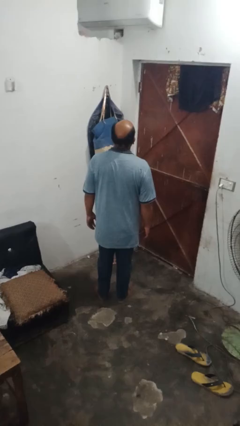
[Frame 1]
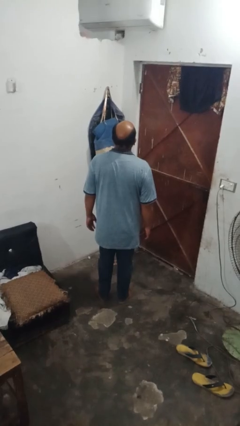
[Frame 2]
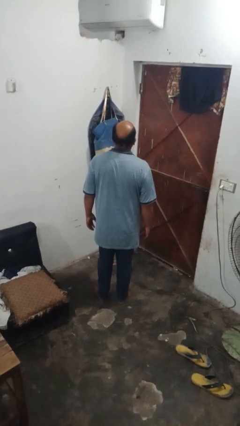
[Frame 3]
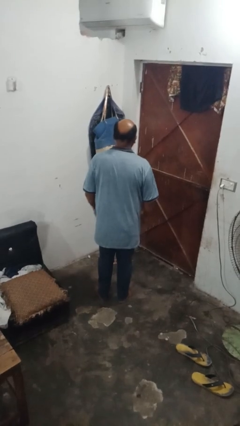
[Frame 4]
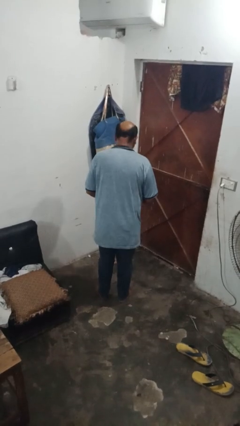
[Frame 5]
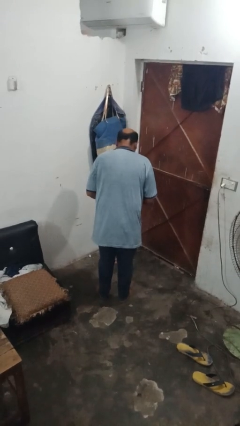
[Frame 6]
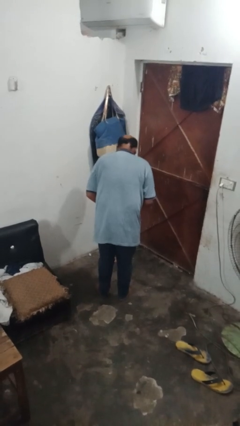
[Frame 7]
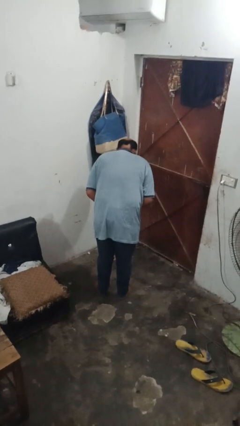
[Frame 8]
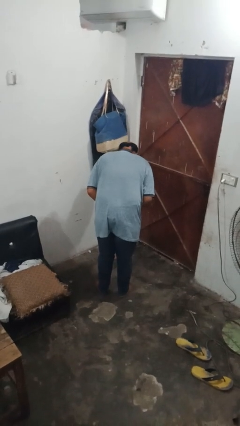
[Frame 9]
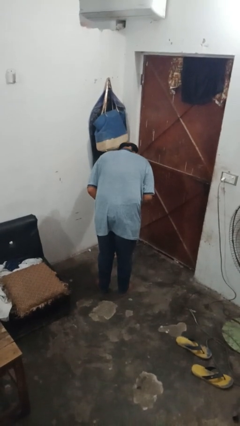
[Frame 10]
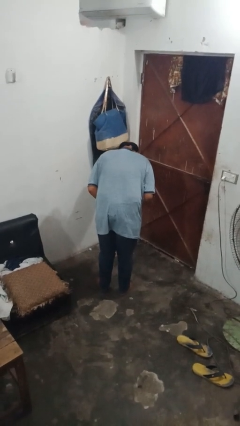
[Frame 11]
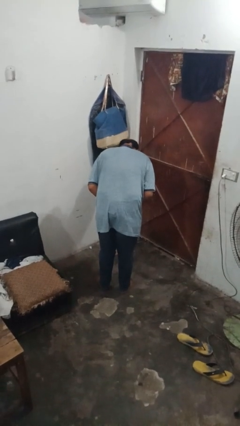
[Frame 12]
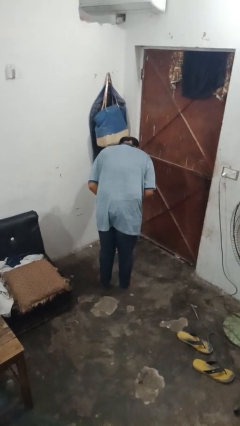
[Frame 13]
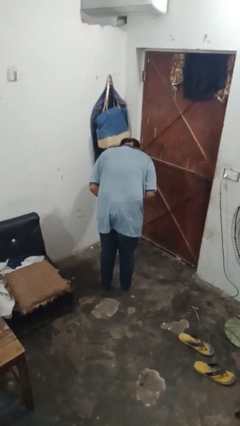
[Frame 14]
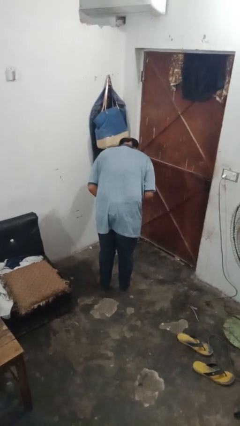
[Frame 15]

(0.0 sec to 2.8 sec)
person bows

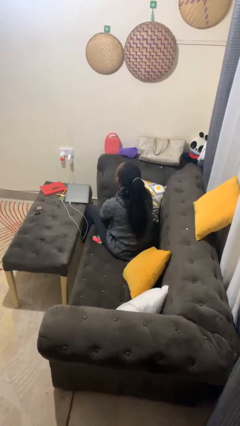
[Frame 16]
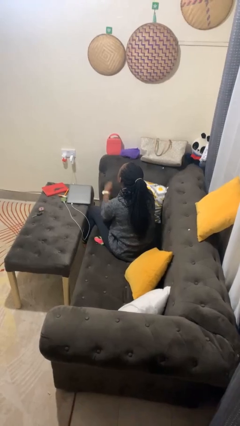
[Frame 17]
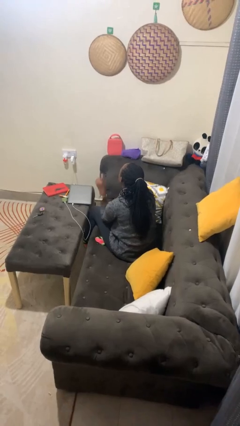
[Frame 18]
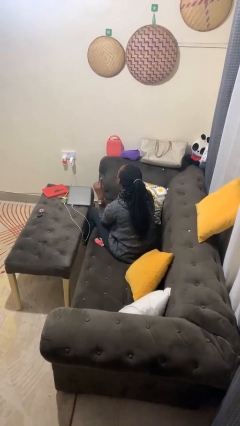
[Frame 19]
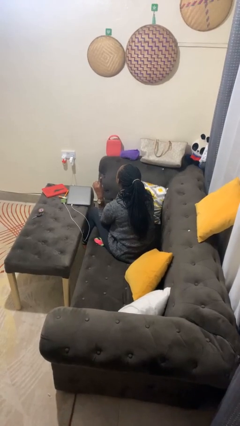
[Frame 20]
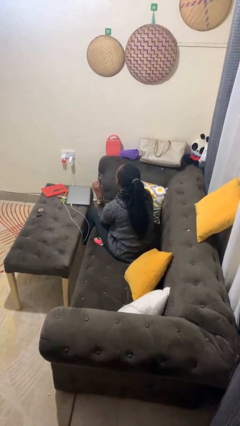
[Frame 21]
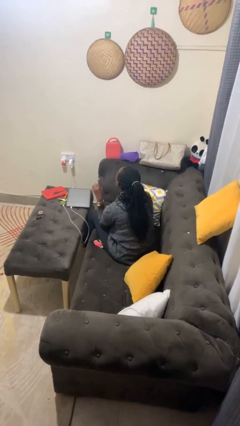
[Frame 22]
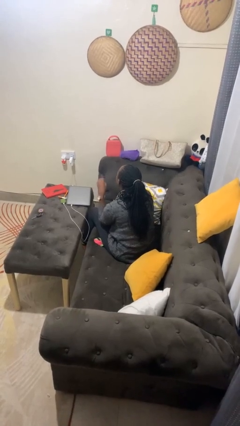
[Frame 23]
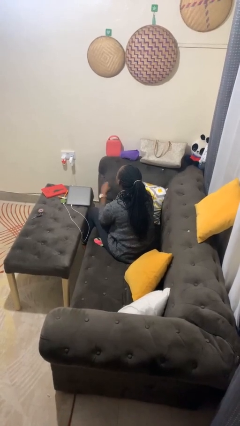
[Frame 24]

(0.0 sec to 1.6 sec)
person gestures number one

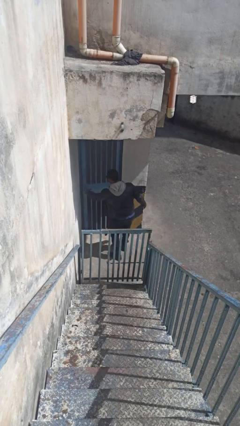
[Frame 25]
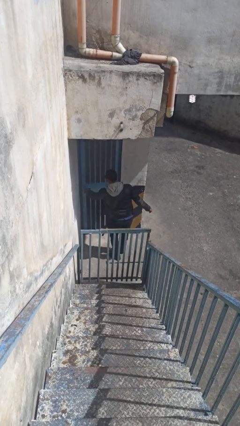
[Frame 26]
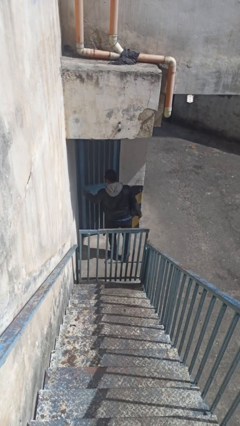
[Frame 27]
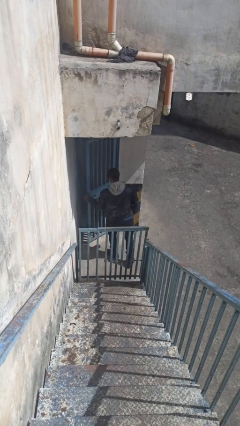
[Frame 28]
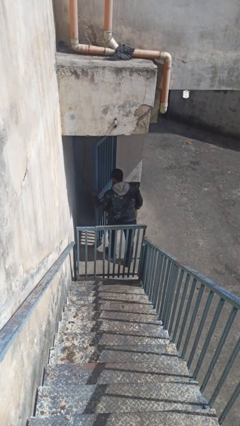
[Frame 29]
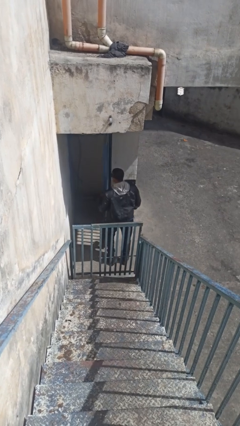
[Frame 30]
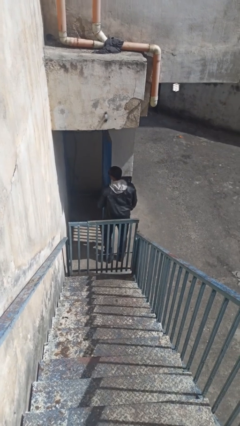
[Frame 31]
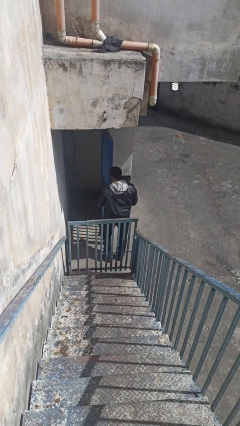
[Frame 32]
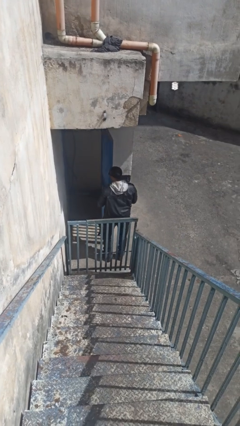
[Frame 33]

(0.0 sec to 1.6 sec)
person opens facility door

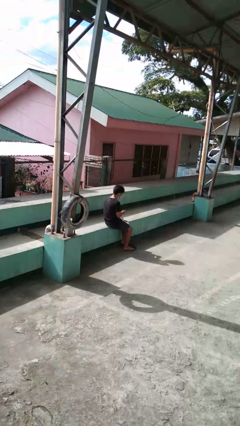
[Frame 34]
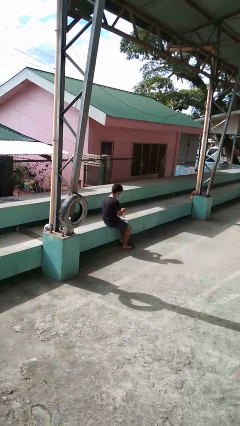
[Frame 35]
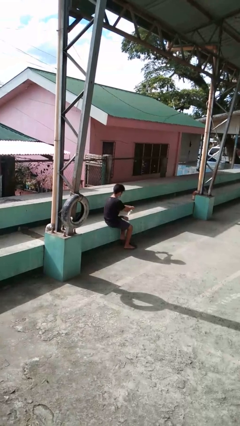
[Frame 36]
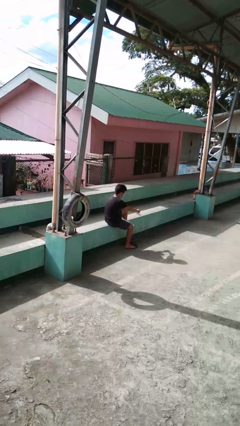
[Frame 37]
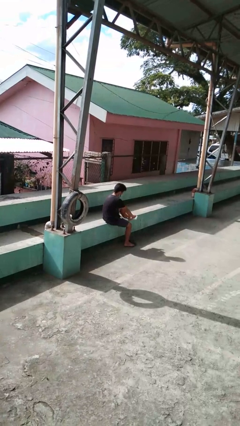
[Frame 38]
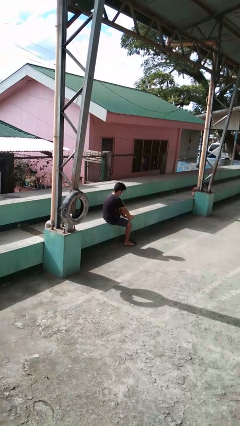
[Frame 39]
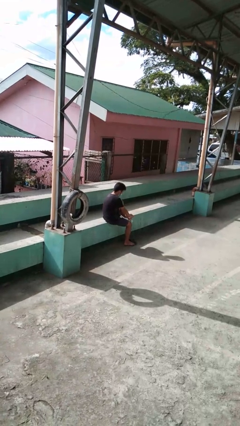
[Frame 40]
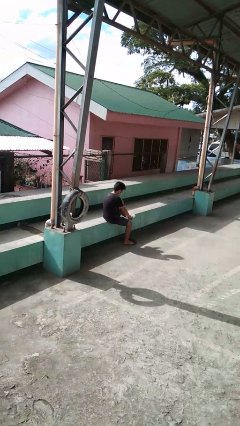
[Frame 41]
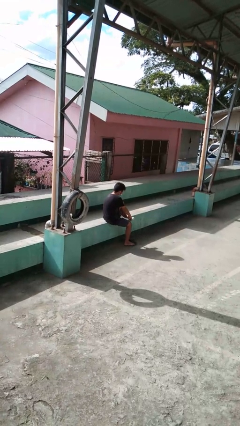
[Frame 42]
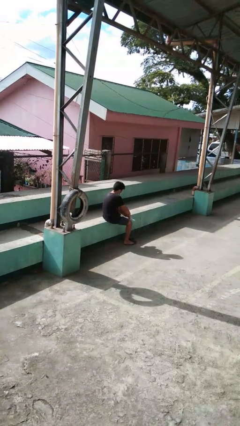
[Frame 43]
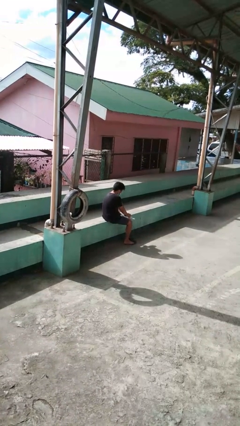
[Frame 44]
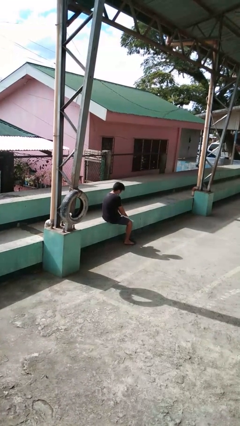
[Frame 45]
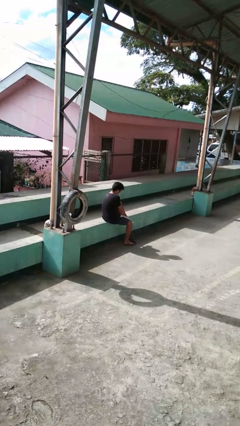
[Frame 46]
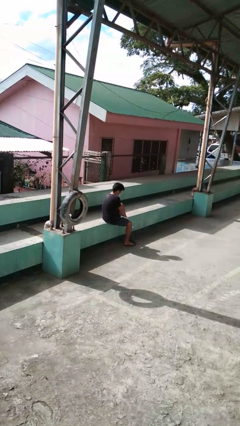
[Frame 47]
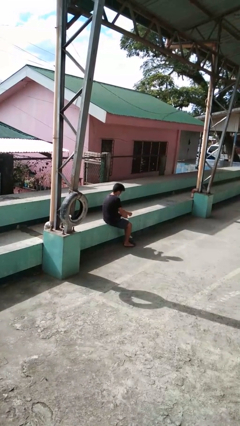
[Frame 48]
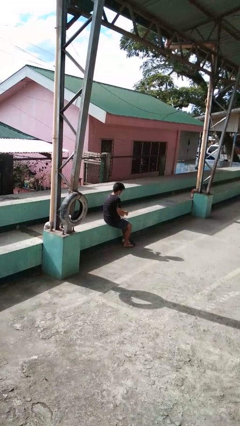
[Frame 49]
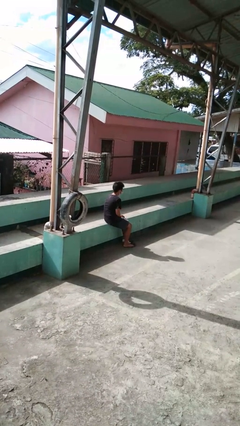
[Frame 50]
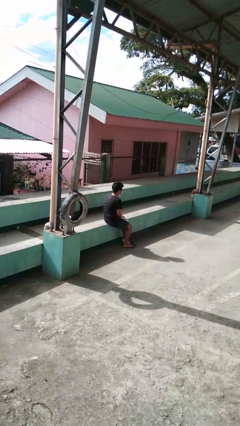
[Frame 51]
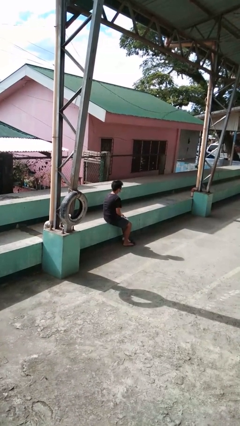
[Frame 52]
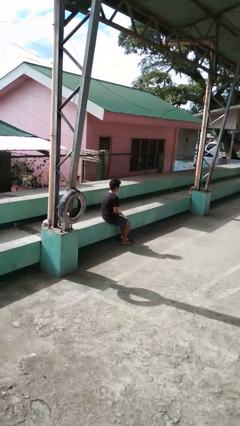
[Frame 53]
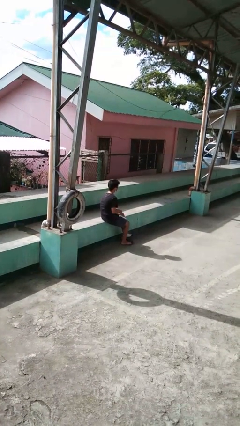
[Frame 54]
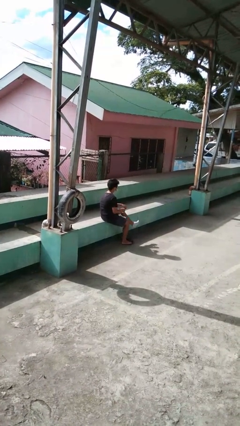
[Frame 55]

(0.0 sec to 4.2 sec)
person puts on socks

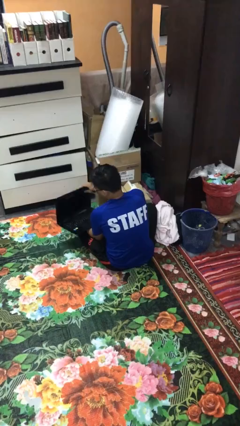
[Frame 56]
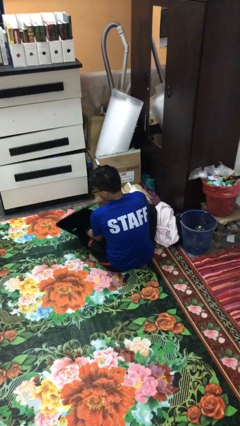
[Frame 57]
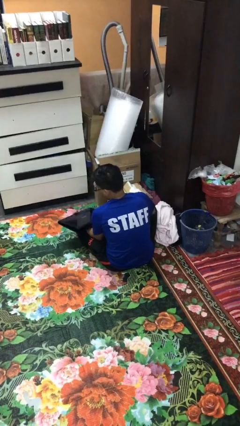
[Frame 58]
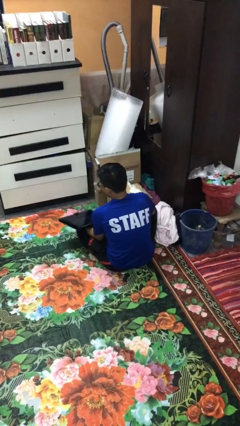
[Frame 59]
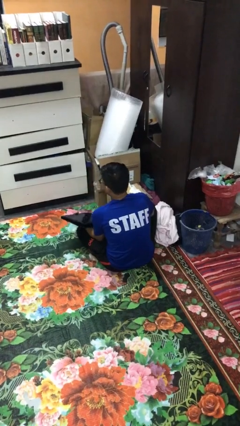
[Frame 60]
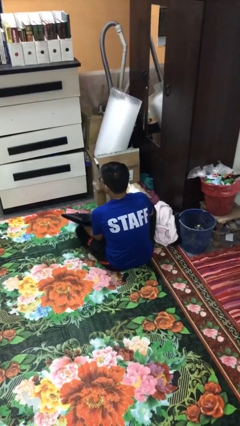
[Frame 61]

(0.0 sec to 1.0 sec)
person closes laptop

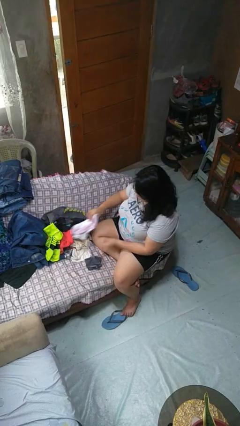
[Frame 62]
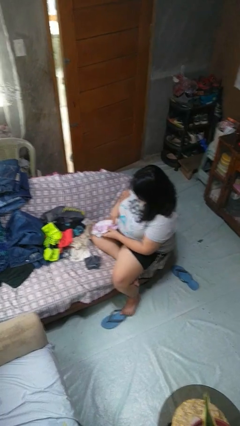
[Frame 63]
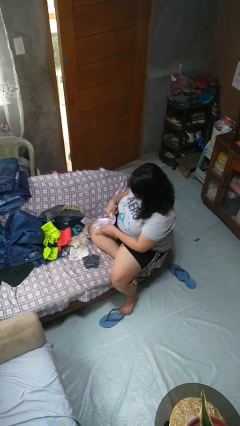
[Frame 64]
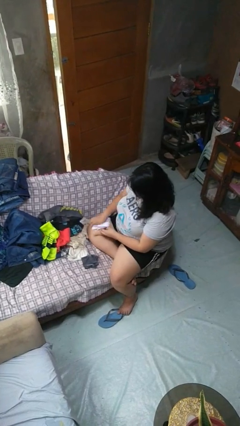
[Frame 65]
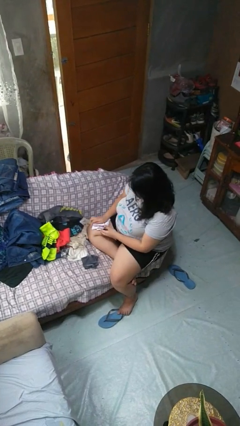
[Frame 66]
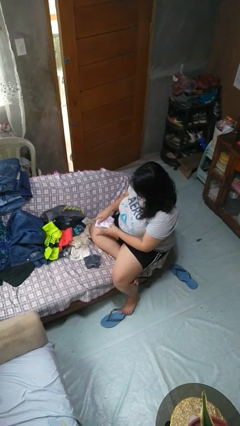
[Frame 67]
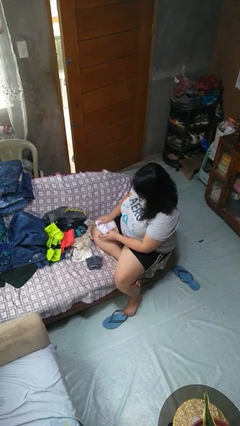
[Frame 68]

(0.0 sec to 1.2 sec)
person folds socks

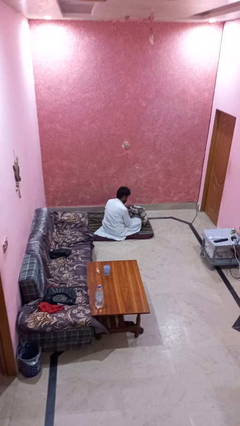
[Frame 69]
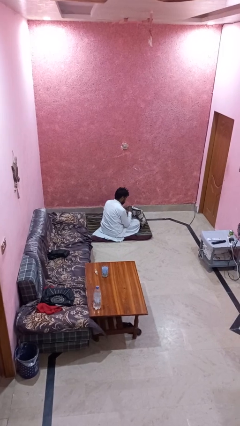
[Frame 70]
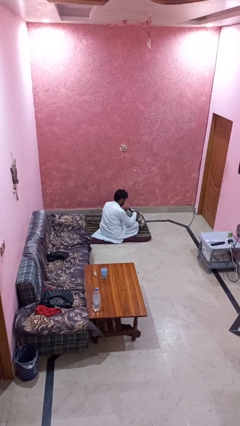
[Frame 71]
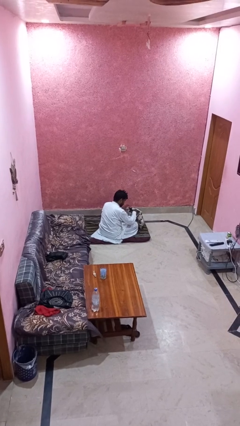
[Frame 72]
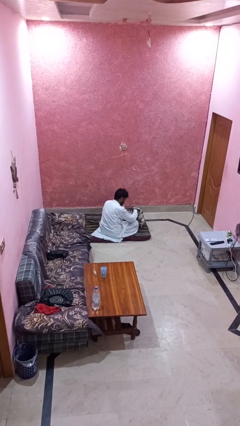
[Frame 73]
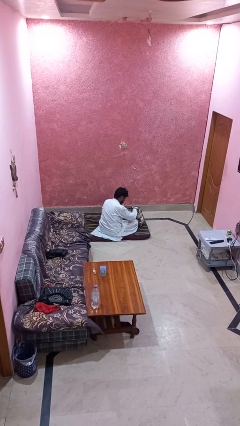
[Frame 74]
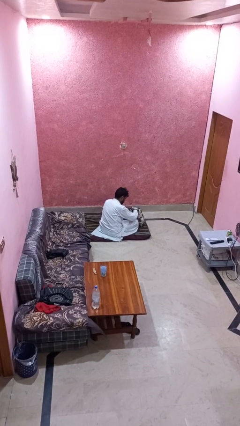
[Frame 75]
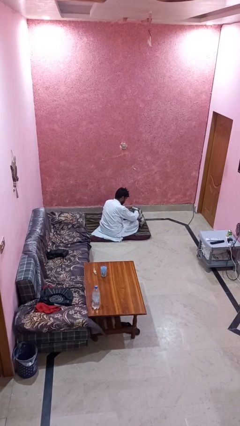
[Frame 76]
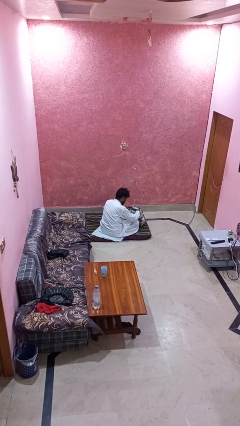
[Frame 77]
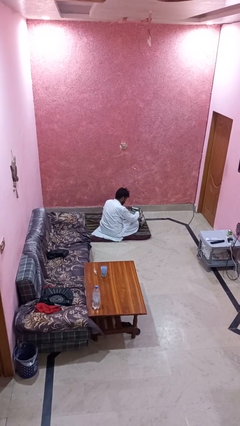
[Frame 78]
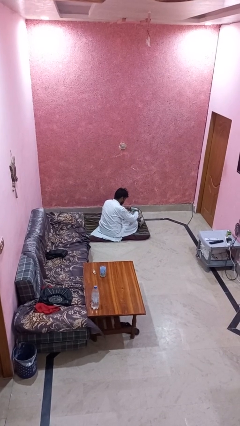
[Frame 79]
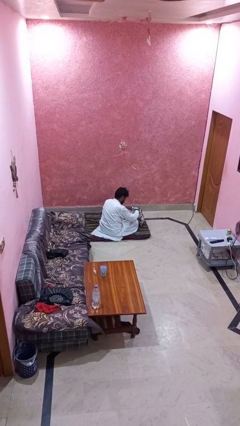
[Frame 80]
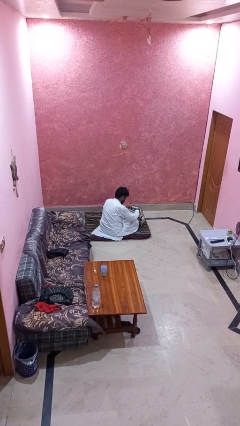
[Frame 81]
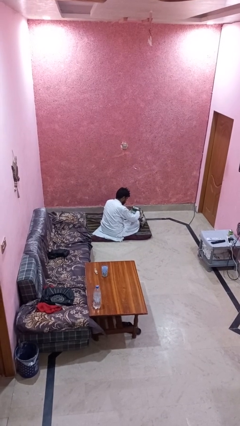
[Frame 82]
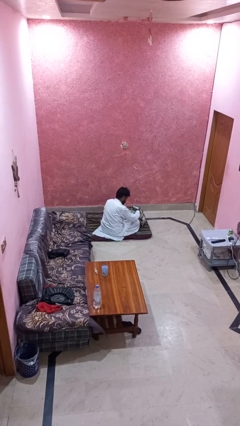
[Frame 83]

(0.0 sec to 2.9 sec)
person searches in backpack

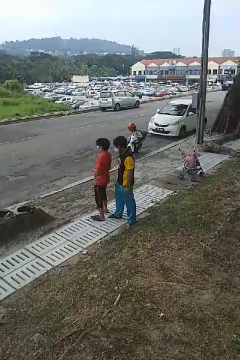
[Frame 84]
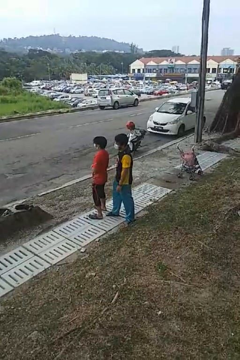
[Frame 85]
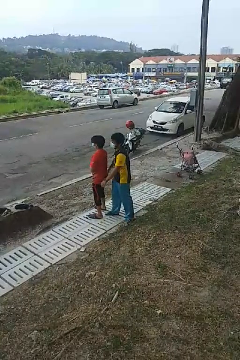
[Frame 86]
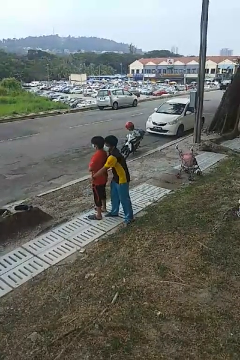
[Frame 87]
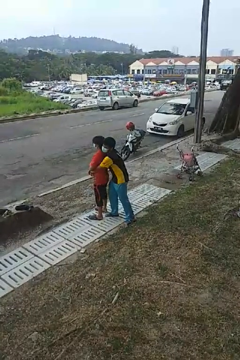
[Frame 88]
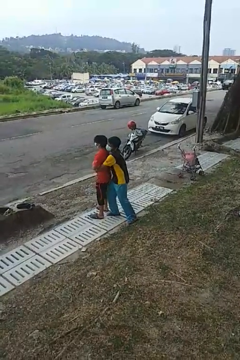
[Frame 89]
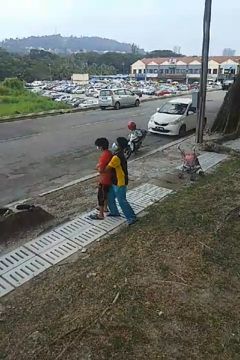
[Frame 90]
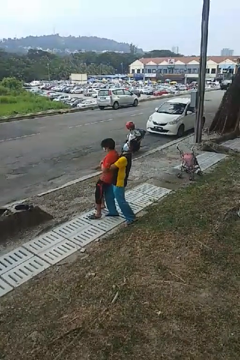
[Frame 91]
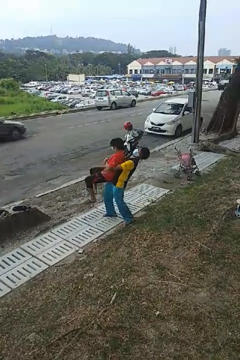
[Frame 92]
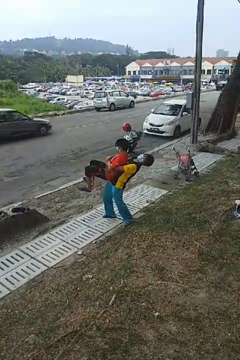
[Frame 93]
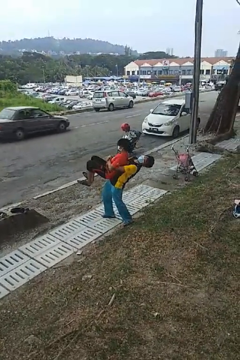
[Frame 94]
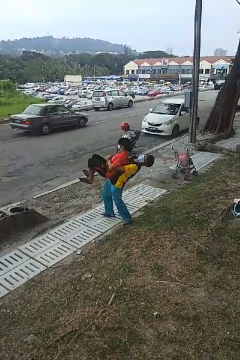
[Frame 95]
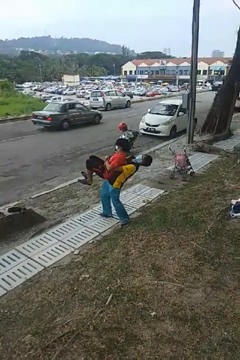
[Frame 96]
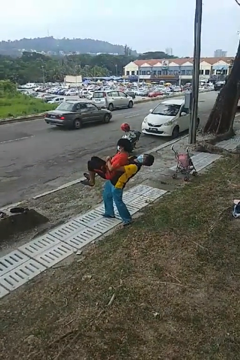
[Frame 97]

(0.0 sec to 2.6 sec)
person picks up person
